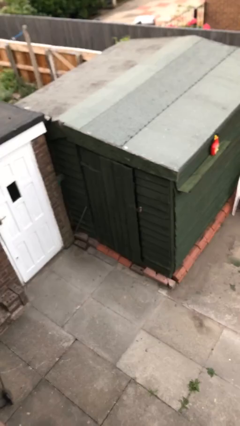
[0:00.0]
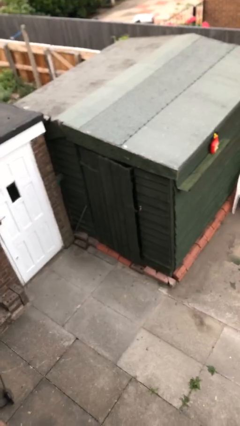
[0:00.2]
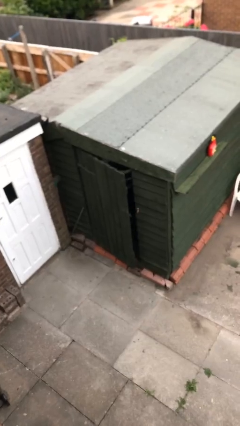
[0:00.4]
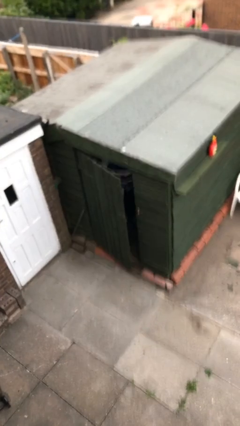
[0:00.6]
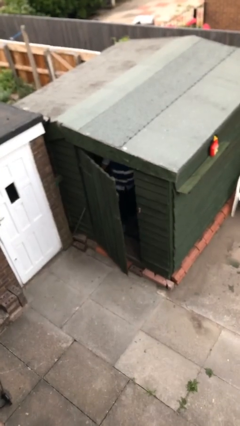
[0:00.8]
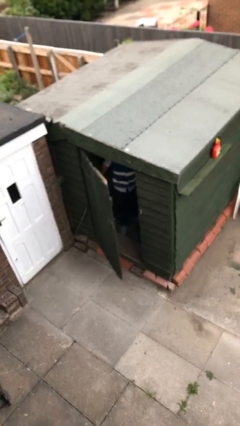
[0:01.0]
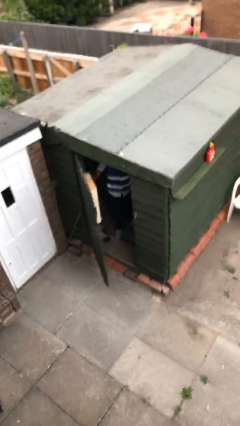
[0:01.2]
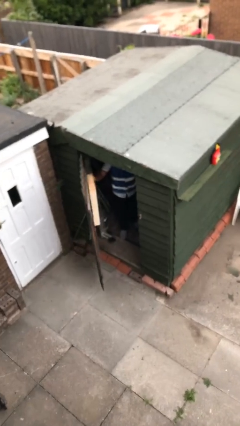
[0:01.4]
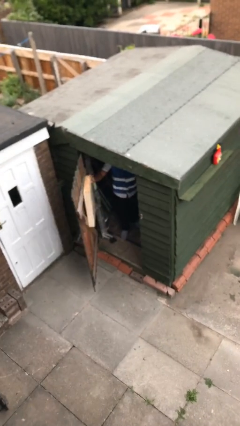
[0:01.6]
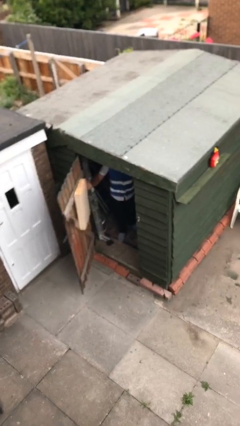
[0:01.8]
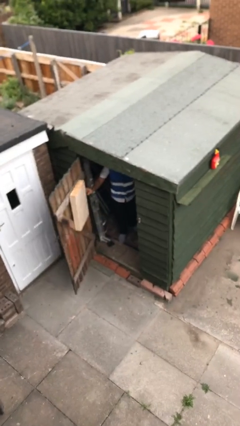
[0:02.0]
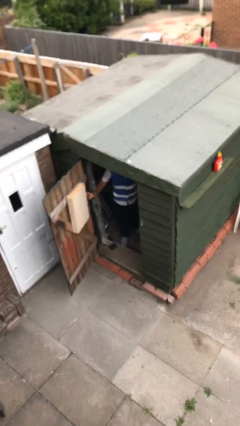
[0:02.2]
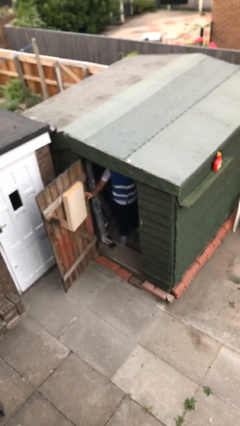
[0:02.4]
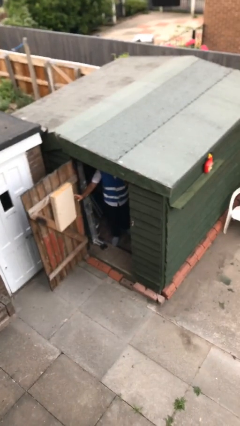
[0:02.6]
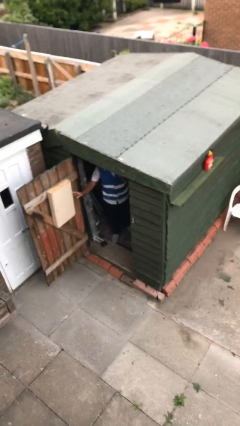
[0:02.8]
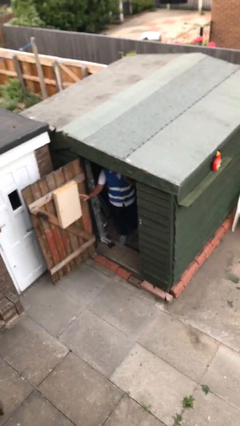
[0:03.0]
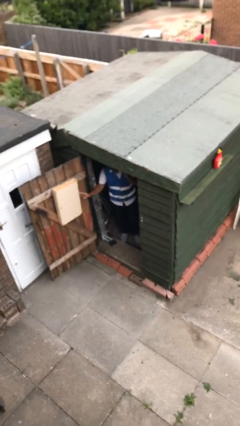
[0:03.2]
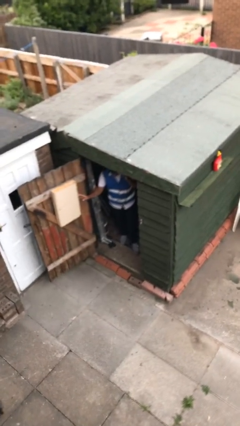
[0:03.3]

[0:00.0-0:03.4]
person opens facility door

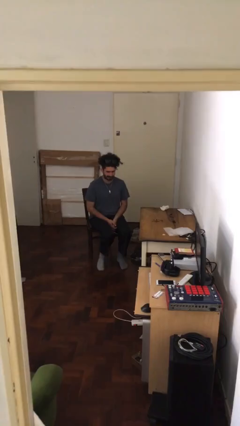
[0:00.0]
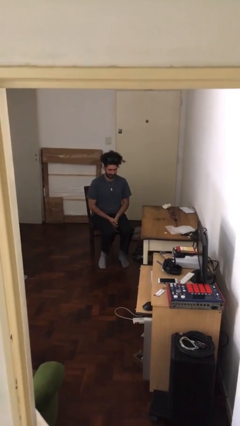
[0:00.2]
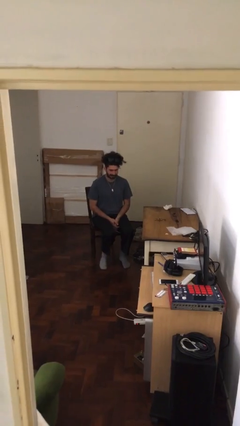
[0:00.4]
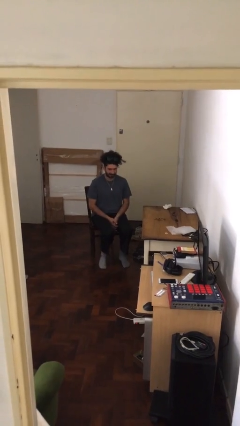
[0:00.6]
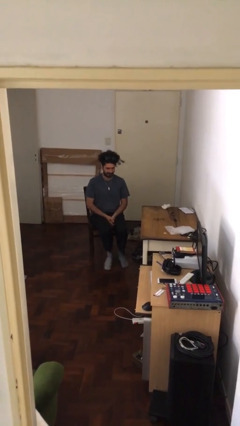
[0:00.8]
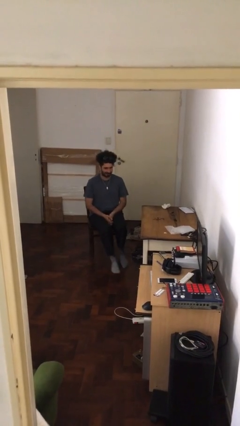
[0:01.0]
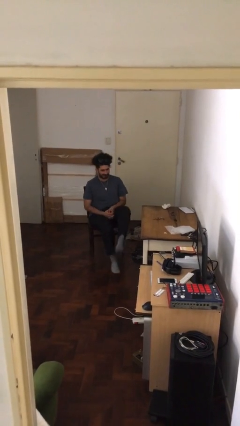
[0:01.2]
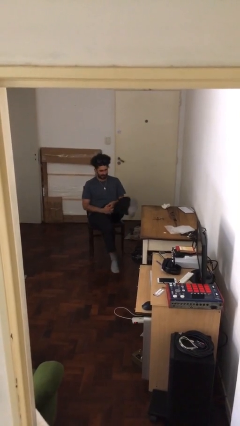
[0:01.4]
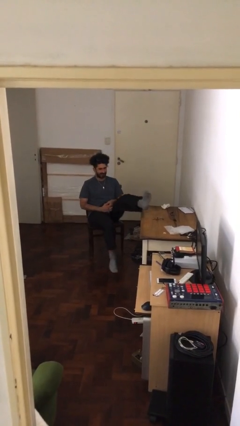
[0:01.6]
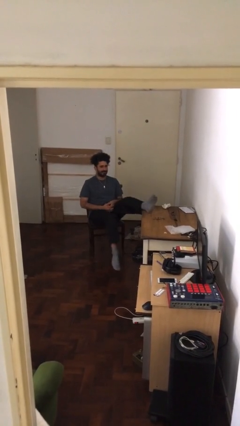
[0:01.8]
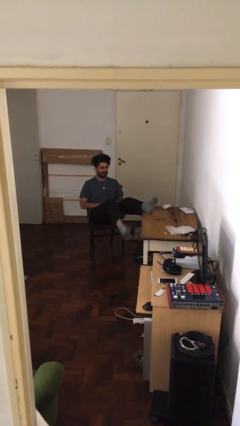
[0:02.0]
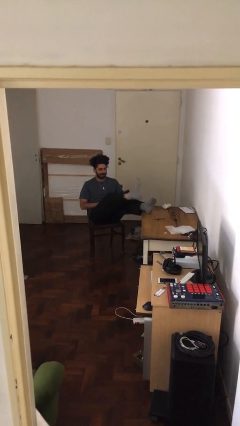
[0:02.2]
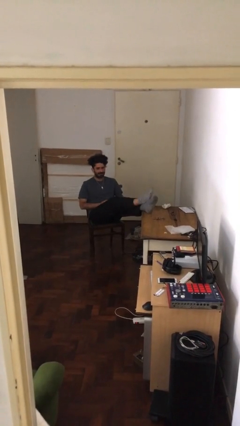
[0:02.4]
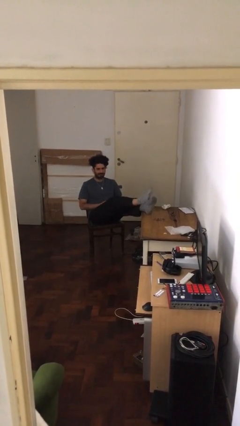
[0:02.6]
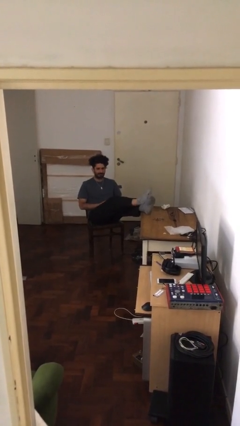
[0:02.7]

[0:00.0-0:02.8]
person puts feet up

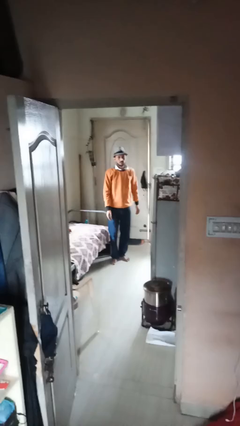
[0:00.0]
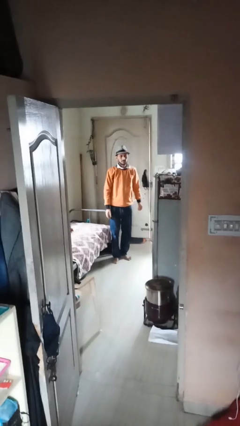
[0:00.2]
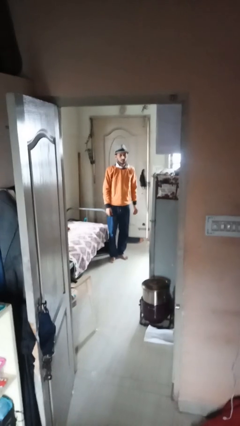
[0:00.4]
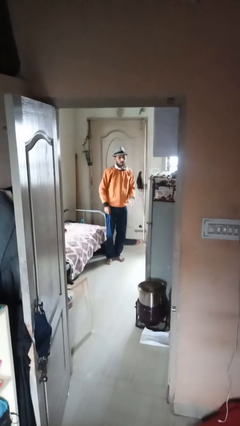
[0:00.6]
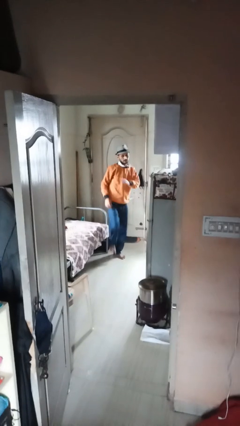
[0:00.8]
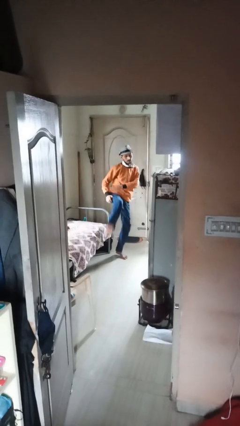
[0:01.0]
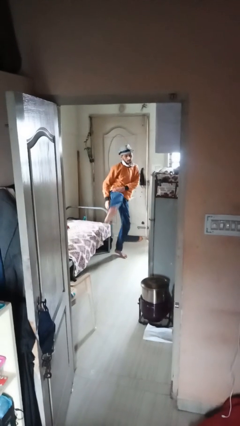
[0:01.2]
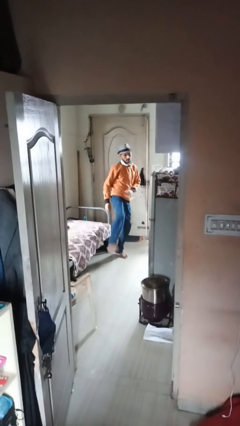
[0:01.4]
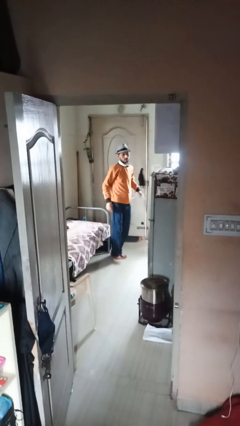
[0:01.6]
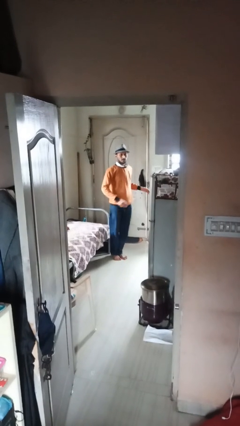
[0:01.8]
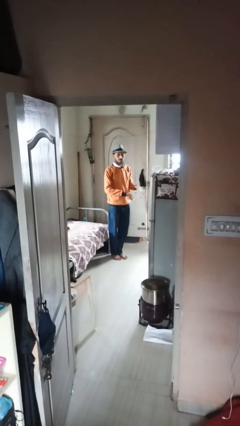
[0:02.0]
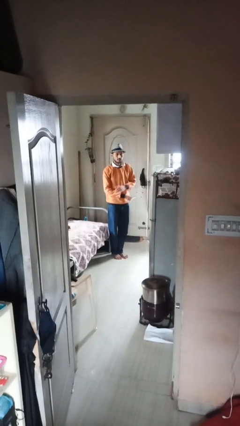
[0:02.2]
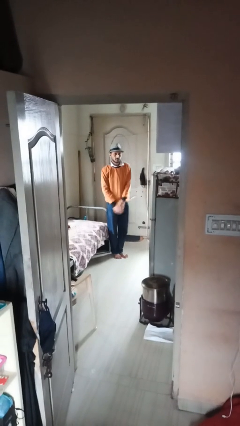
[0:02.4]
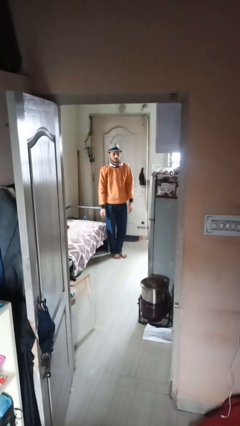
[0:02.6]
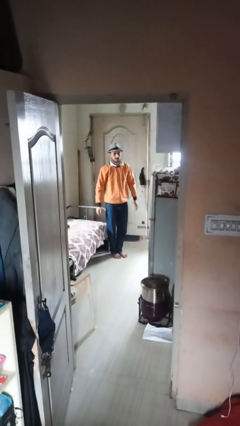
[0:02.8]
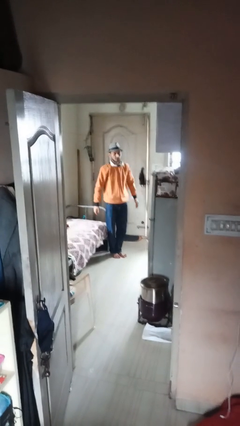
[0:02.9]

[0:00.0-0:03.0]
person karate kicks

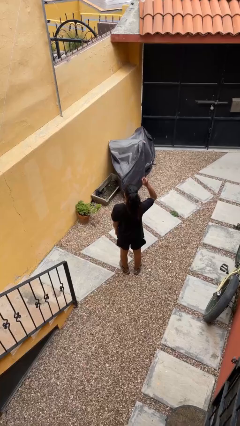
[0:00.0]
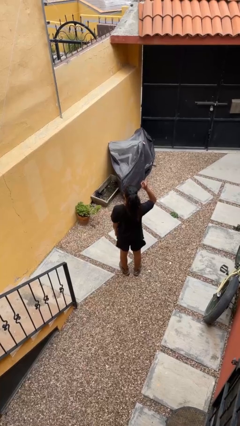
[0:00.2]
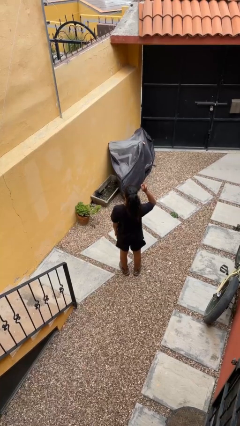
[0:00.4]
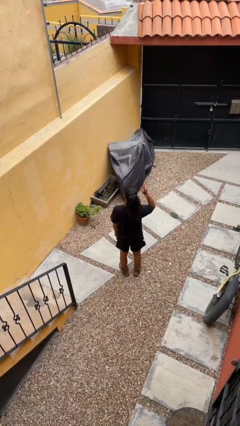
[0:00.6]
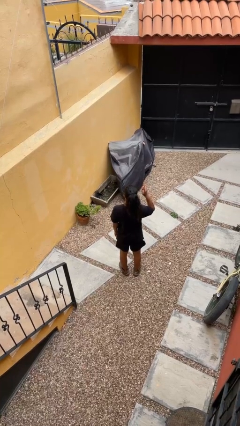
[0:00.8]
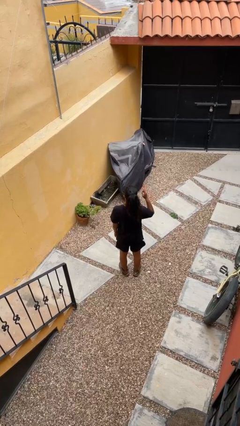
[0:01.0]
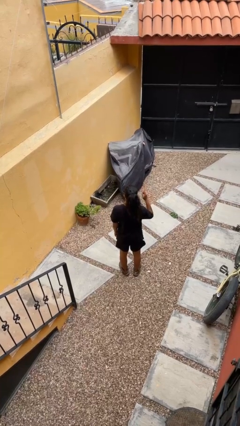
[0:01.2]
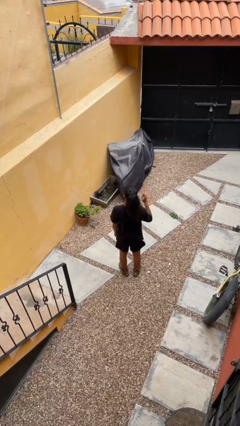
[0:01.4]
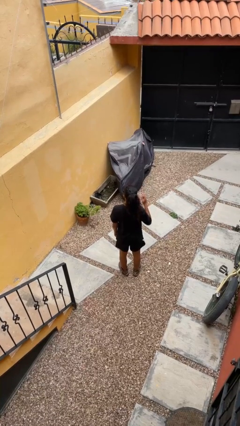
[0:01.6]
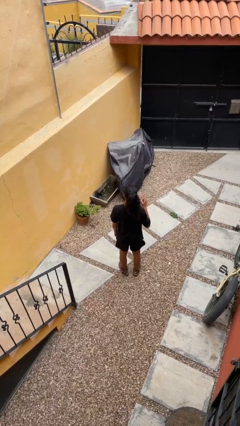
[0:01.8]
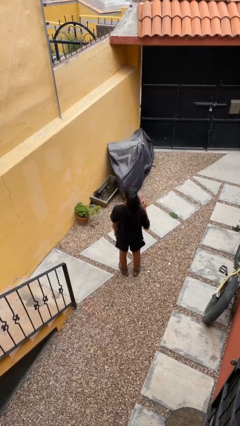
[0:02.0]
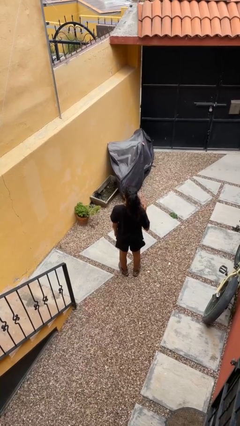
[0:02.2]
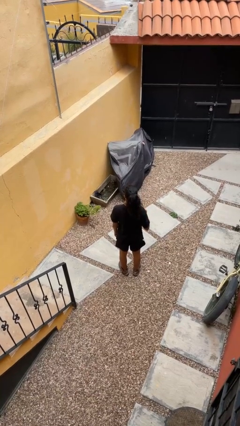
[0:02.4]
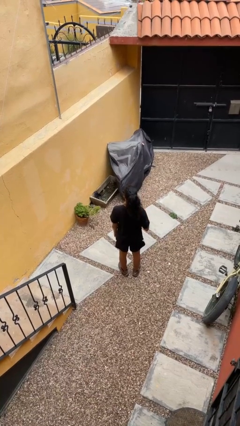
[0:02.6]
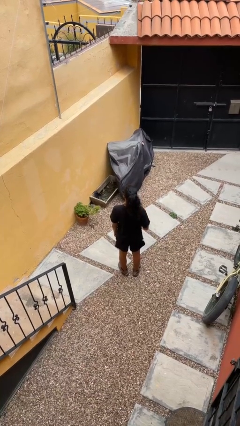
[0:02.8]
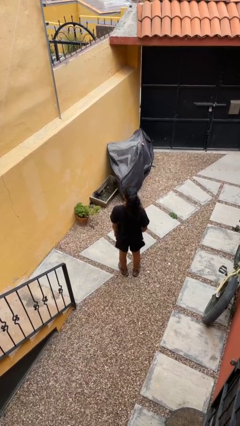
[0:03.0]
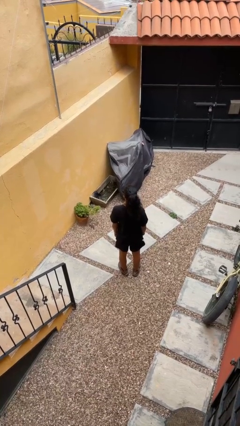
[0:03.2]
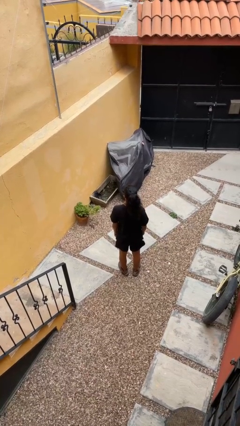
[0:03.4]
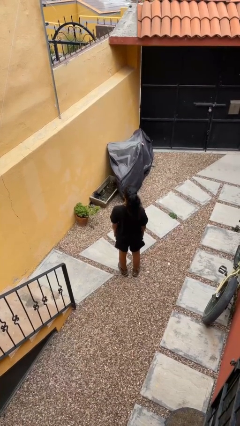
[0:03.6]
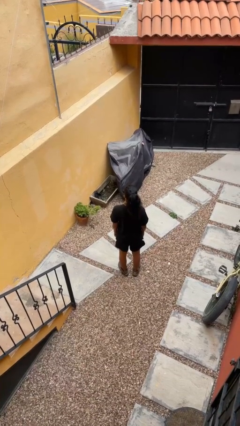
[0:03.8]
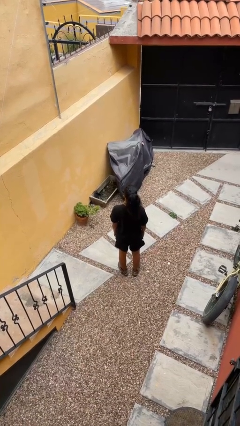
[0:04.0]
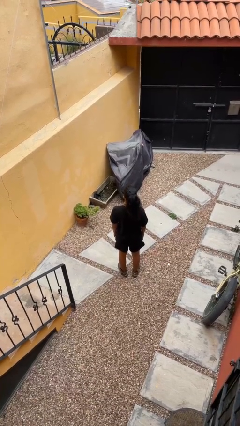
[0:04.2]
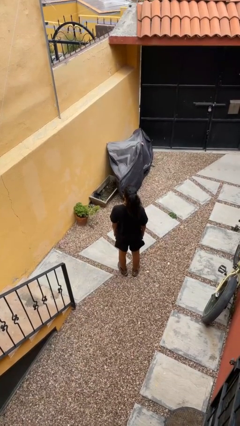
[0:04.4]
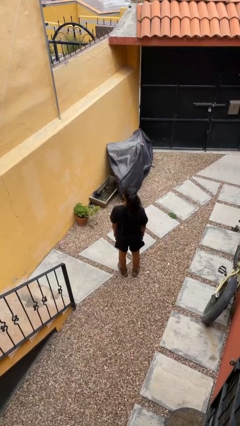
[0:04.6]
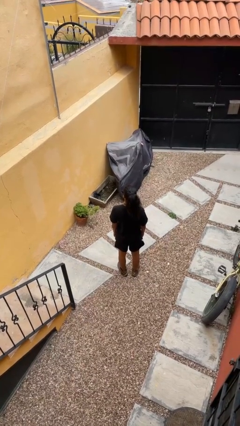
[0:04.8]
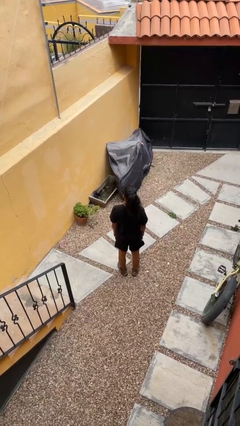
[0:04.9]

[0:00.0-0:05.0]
person gestures lower hand

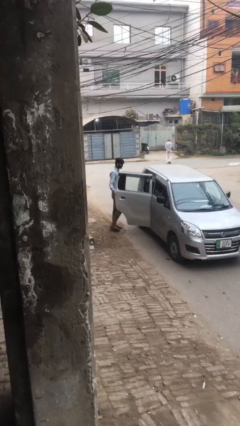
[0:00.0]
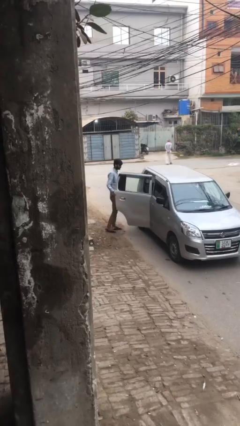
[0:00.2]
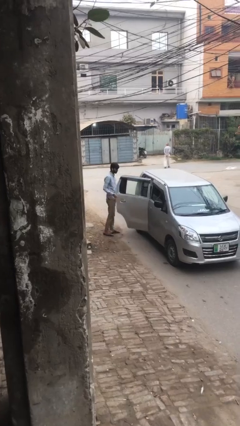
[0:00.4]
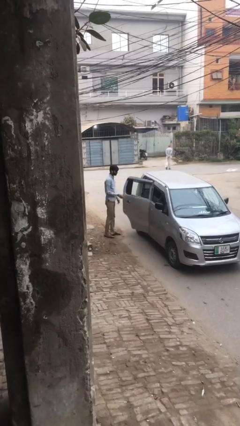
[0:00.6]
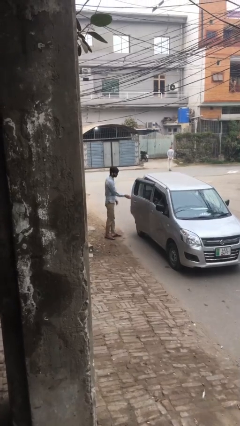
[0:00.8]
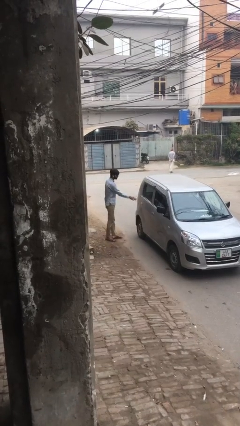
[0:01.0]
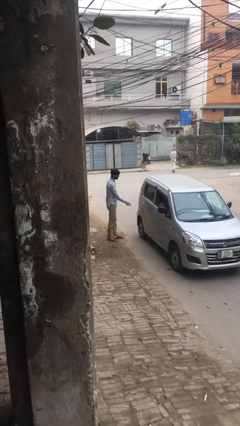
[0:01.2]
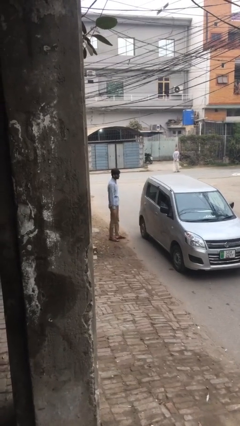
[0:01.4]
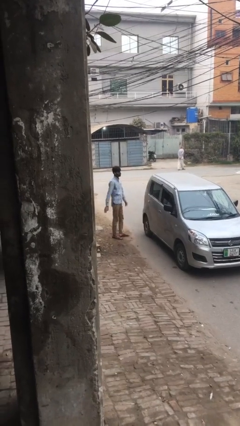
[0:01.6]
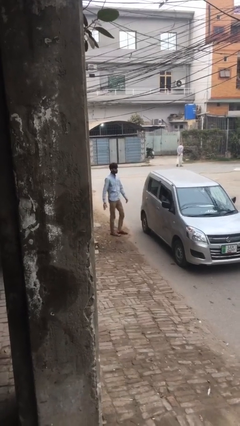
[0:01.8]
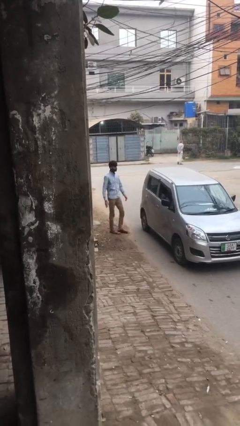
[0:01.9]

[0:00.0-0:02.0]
person closes car door

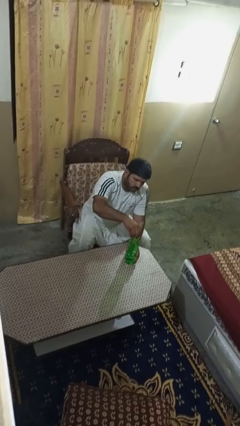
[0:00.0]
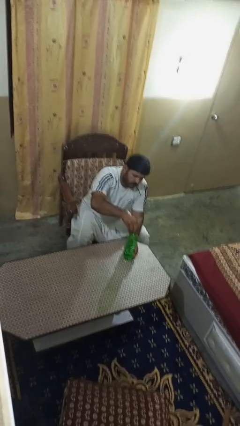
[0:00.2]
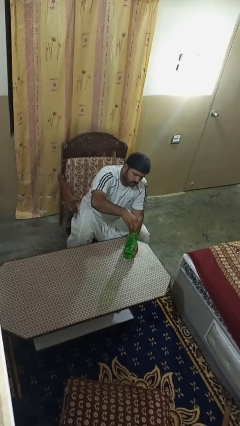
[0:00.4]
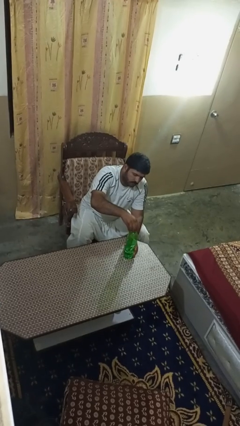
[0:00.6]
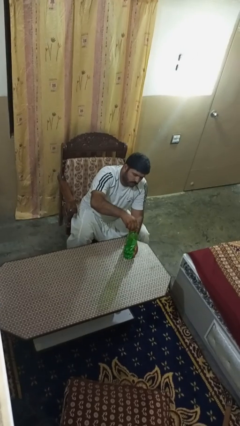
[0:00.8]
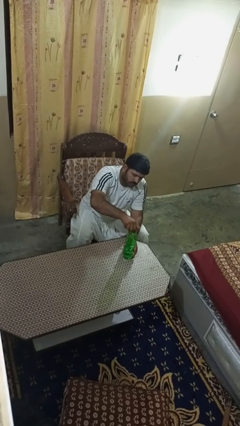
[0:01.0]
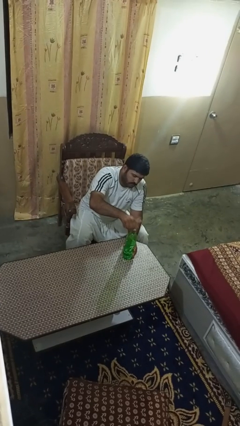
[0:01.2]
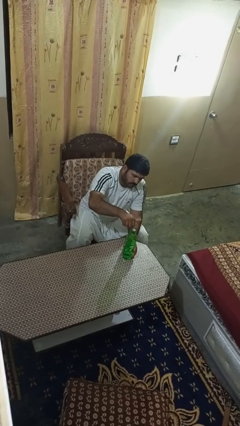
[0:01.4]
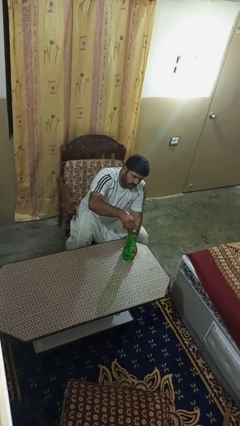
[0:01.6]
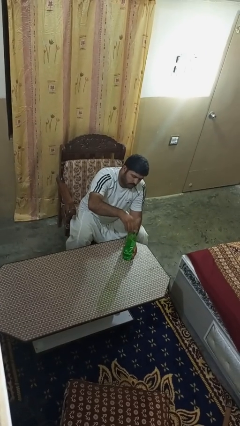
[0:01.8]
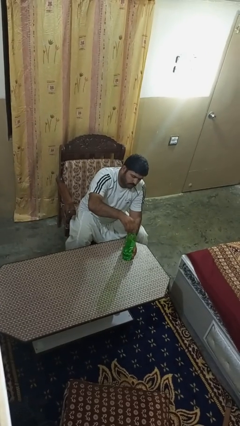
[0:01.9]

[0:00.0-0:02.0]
person screws lid to bottle
